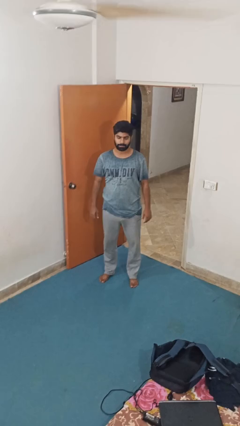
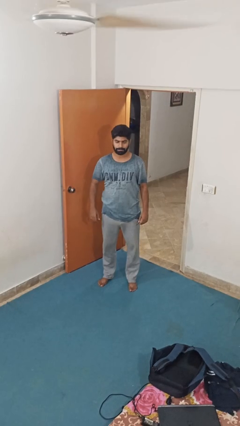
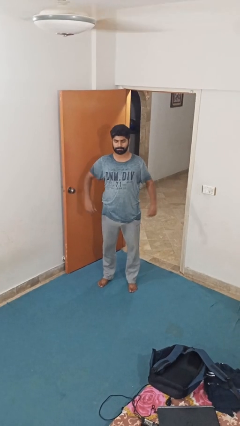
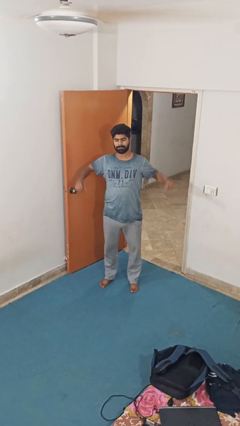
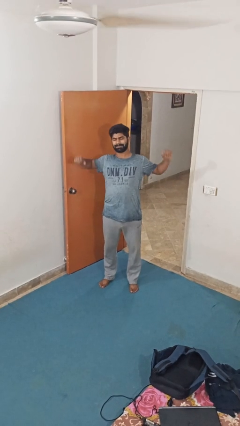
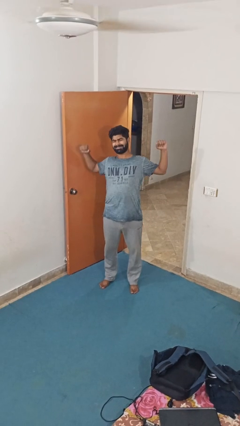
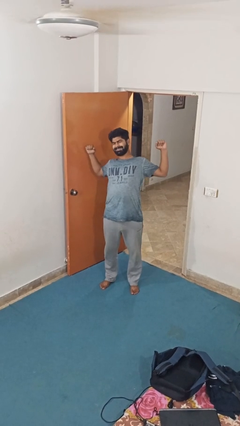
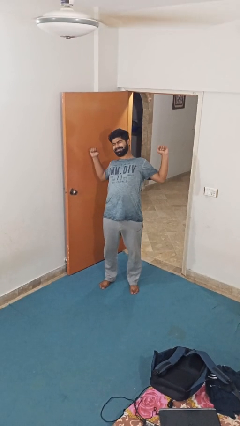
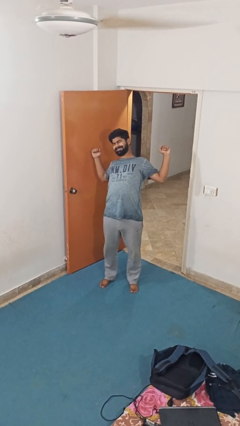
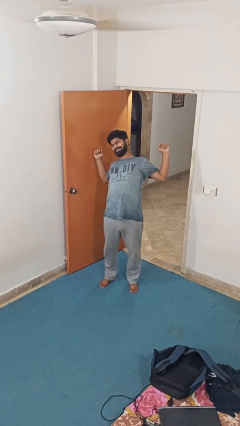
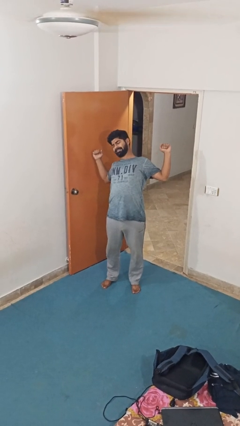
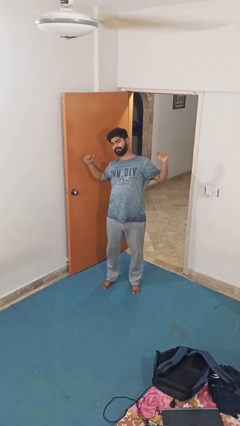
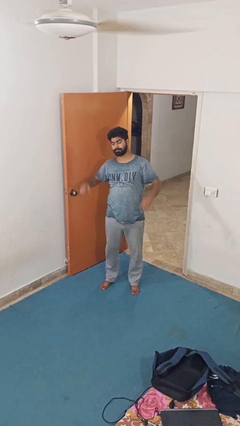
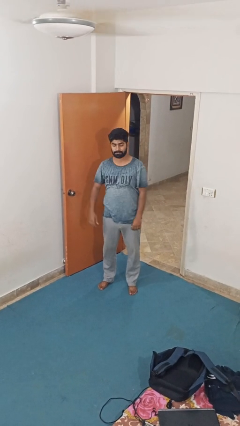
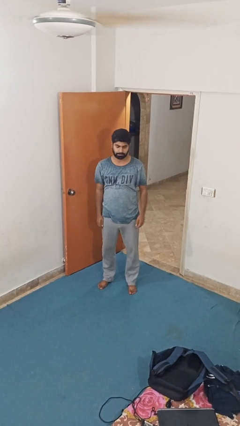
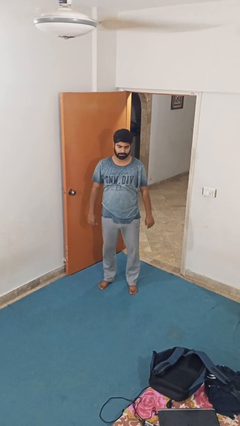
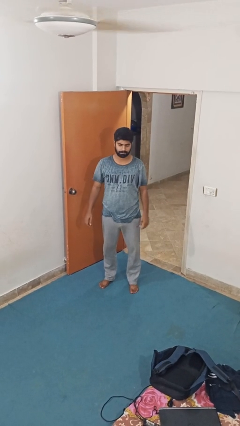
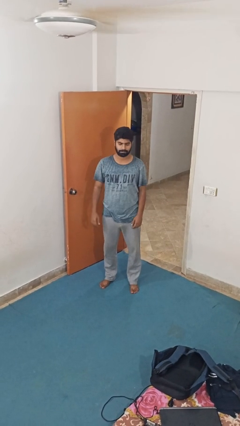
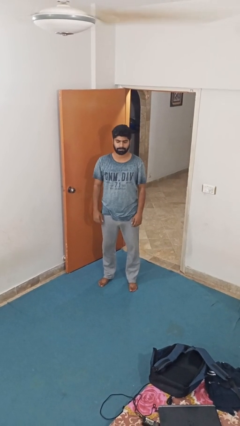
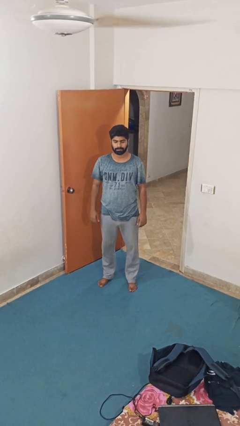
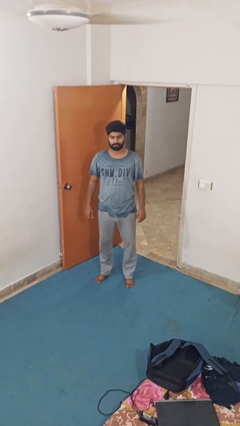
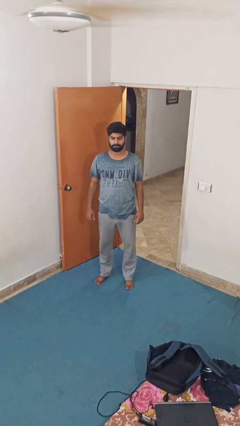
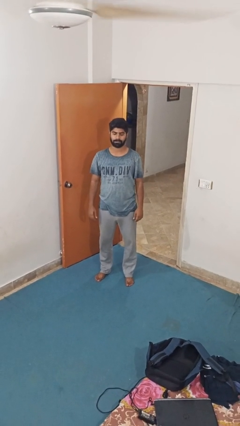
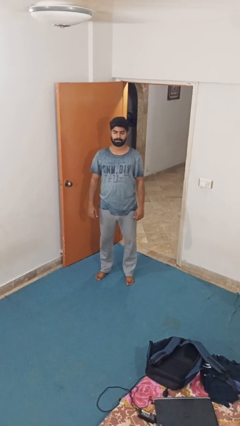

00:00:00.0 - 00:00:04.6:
person stretches arms to side

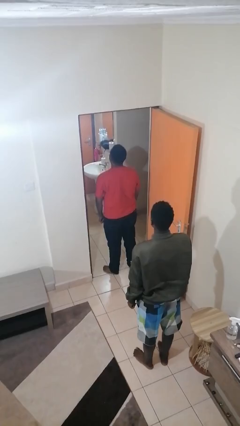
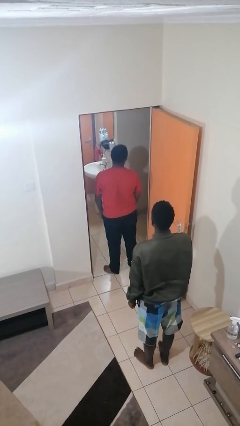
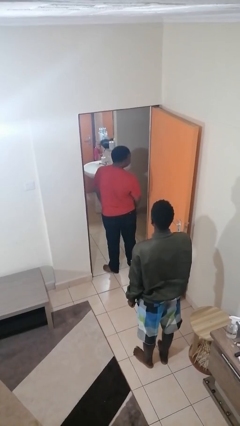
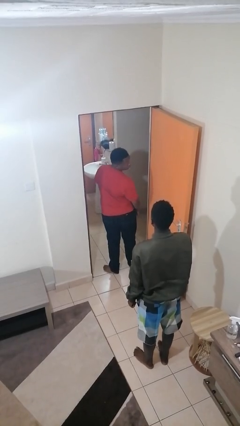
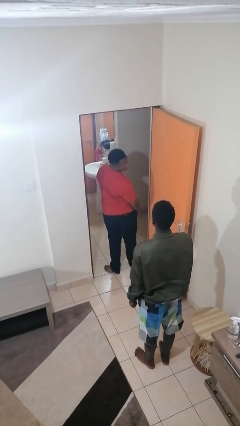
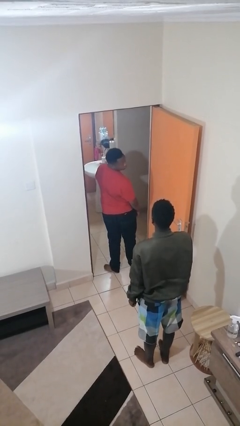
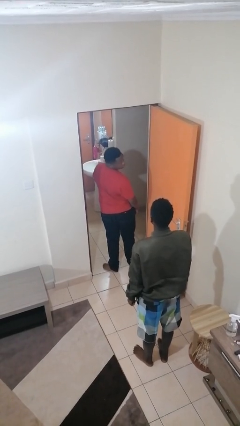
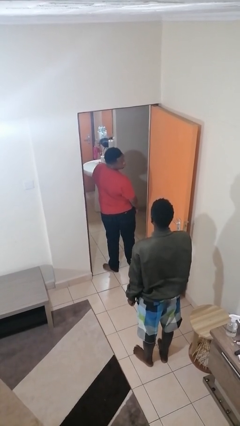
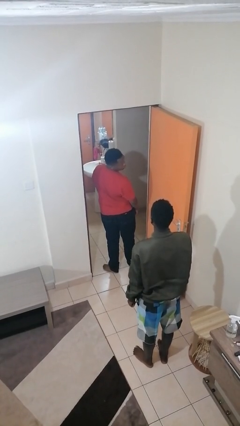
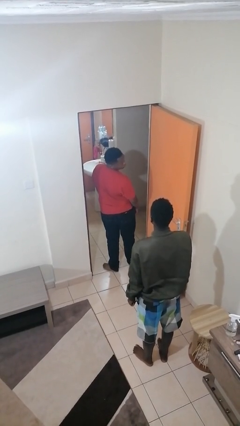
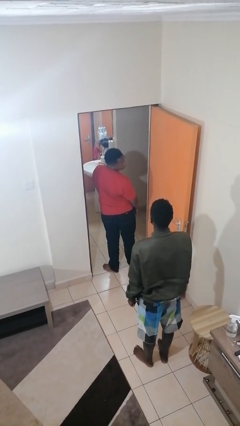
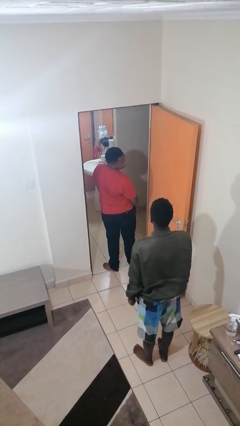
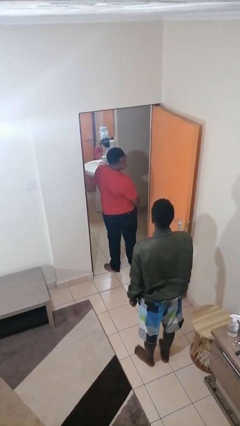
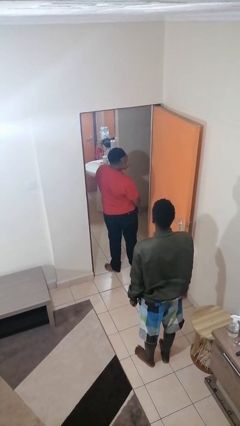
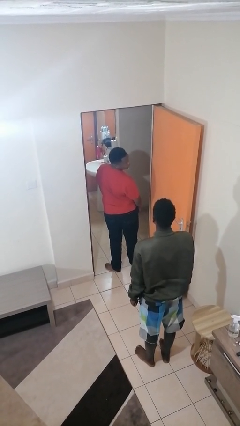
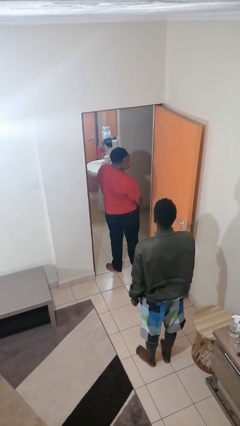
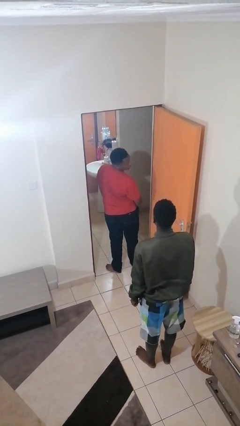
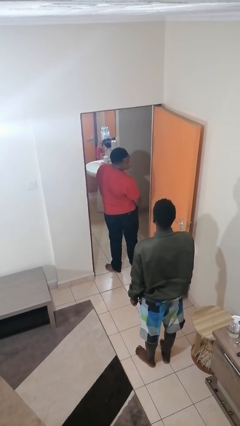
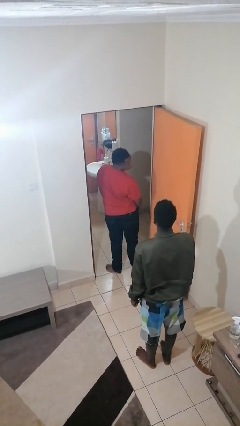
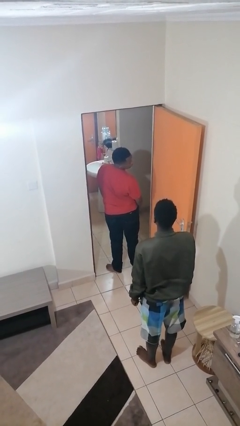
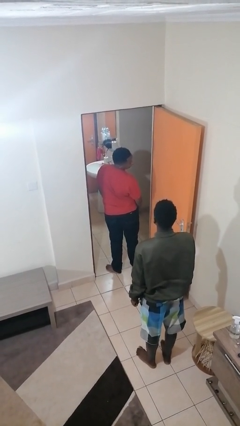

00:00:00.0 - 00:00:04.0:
person looks over shoulder

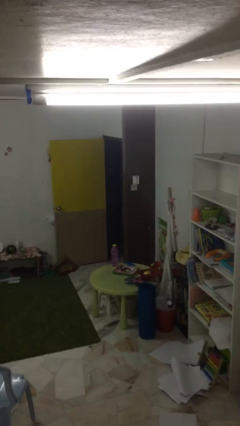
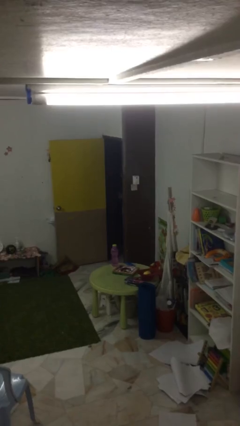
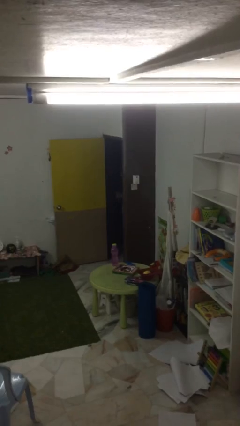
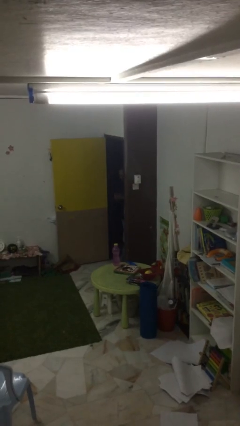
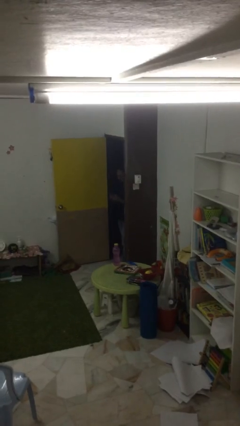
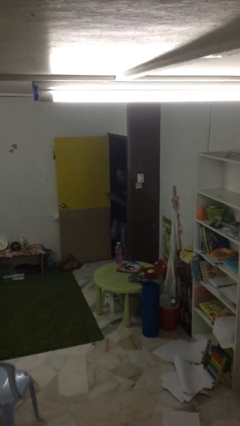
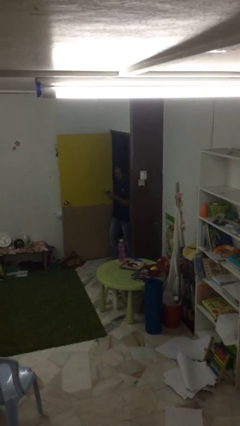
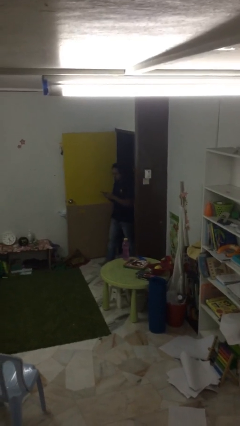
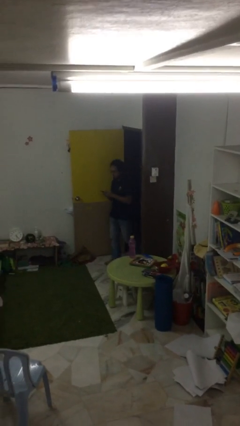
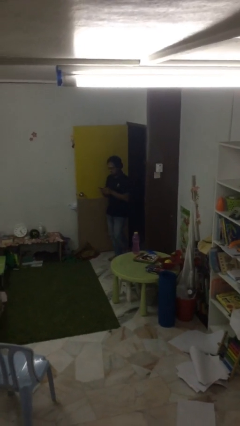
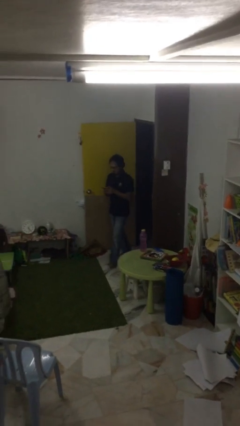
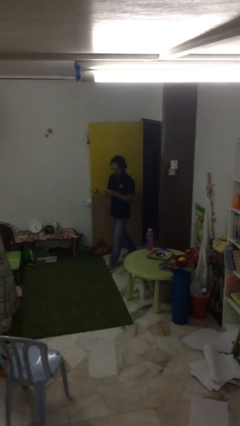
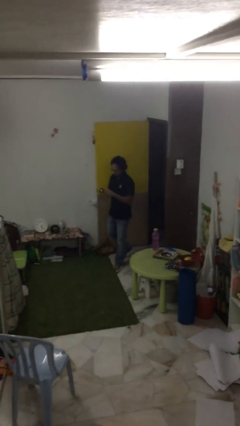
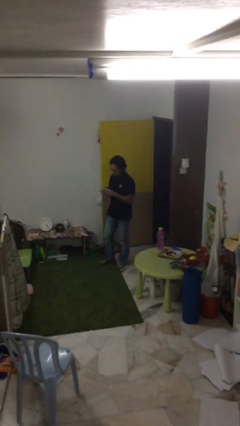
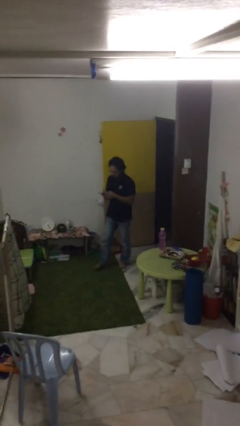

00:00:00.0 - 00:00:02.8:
person enters scene through structure

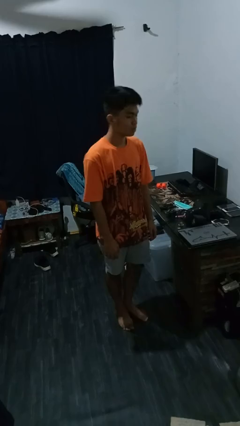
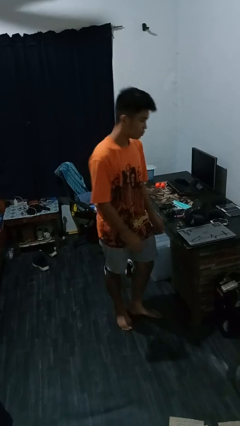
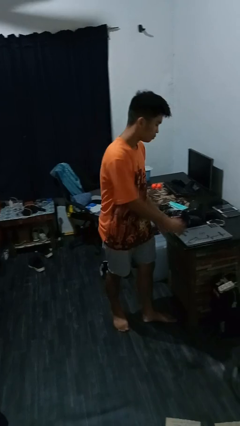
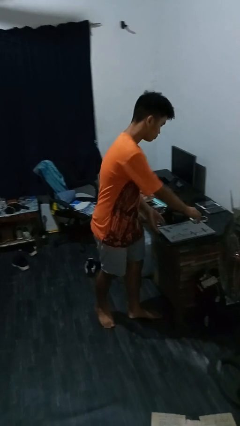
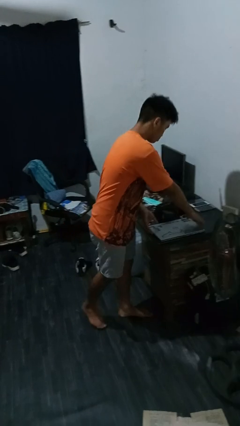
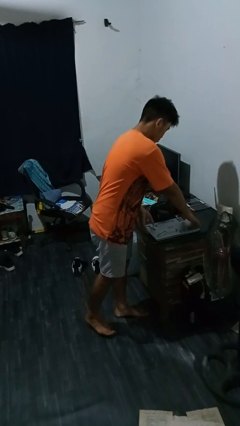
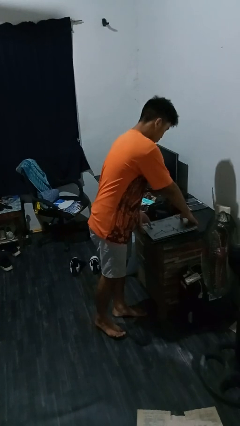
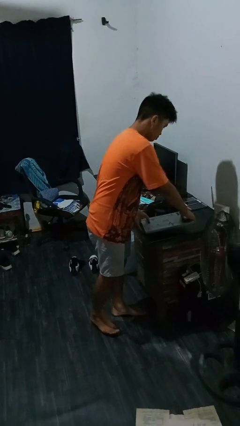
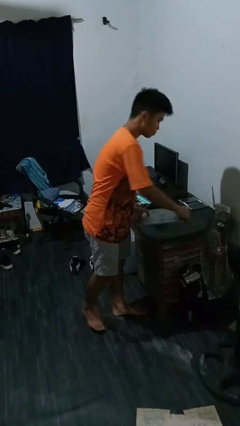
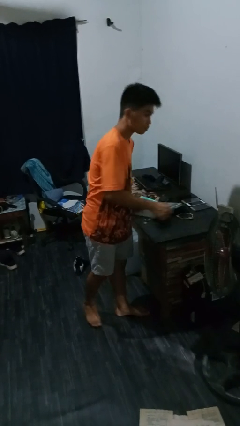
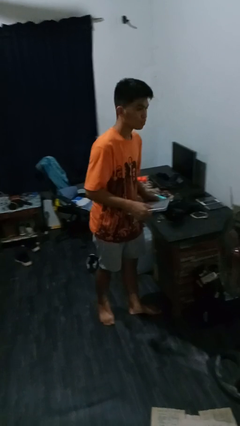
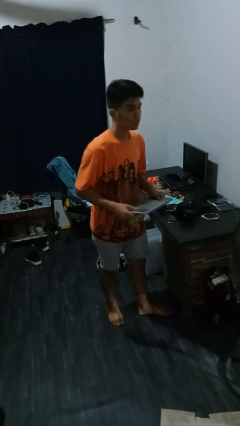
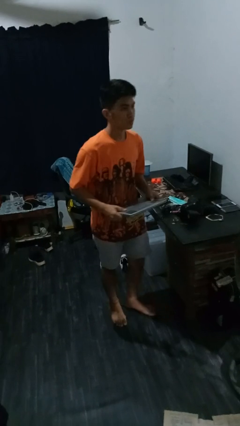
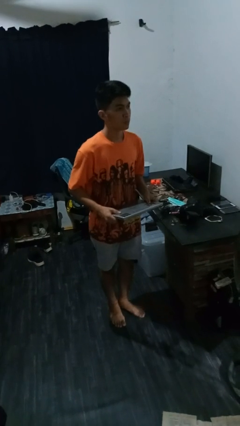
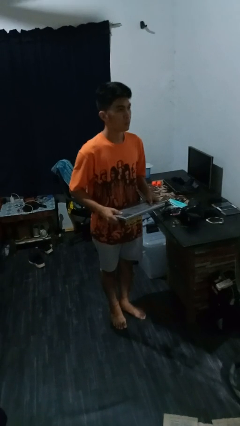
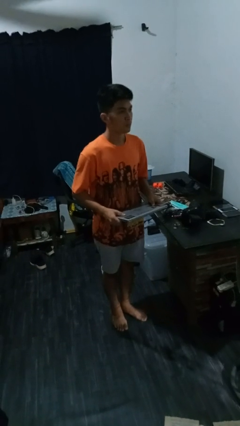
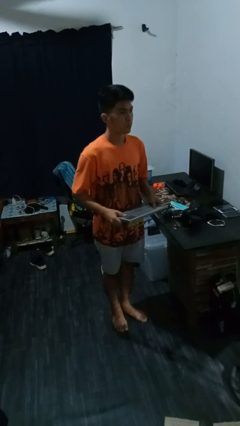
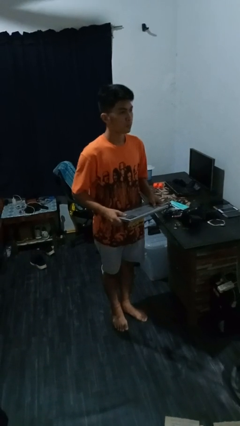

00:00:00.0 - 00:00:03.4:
person picks up object from countertop

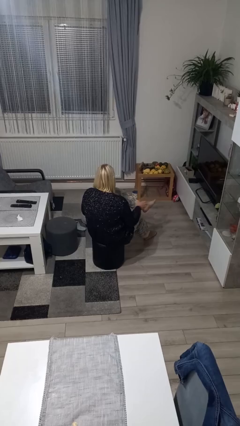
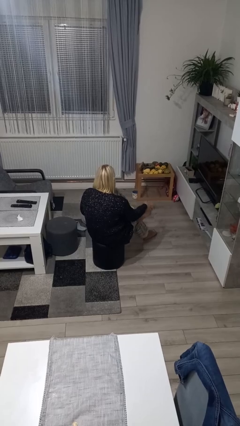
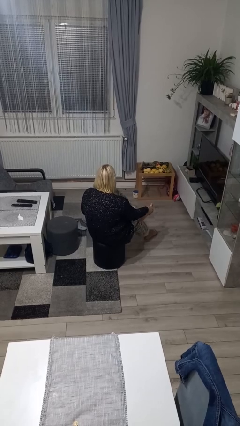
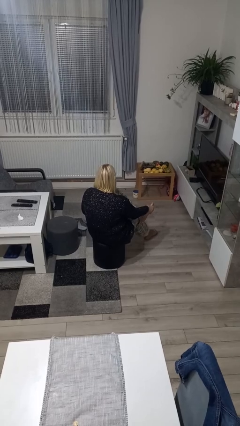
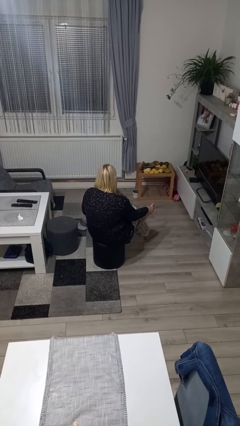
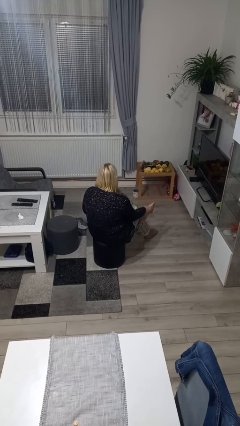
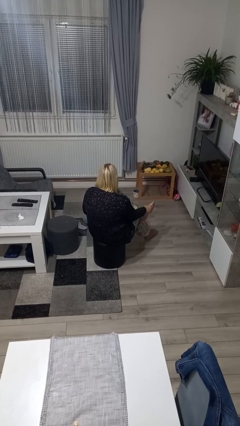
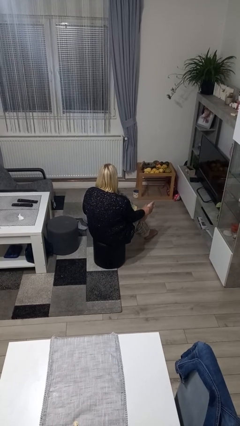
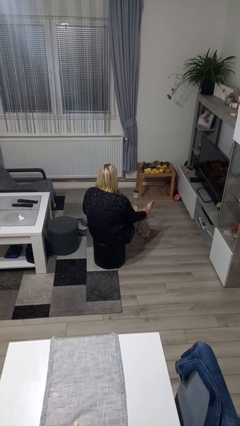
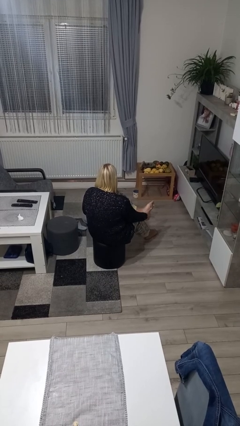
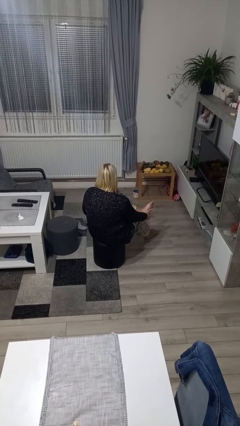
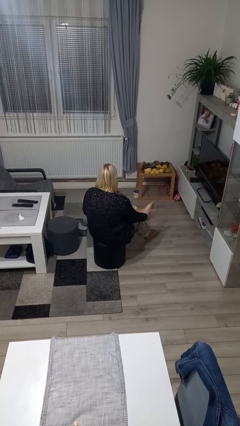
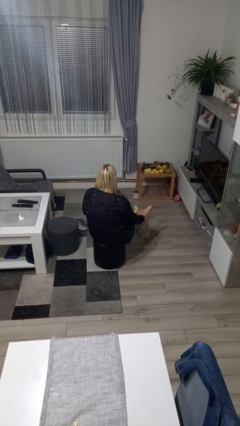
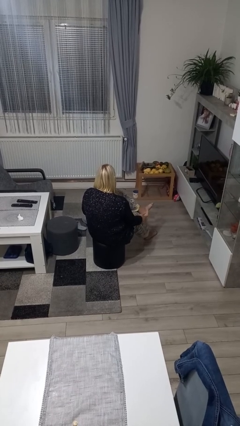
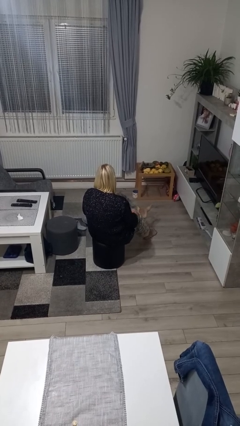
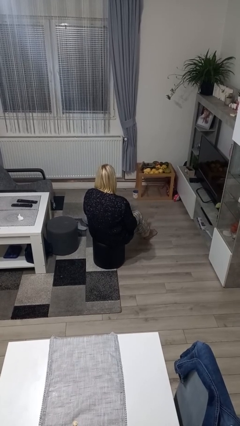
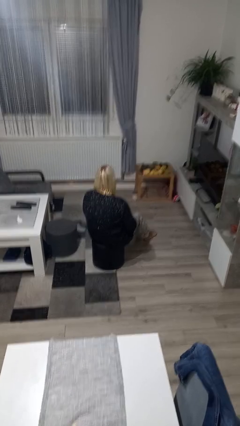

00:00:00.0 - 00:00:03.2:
person rubs foot
